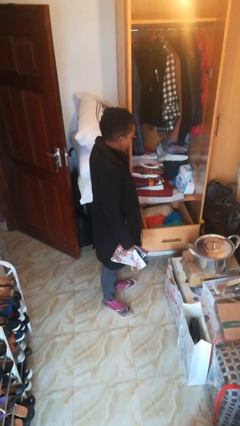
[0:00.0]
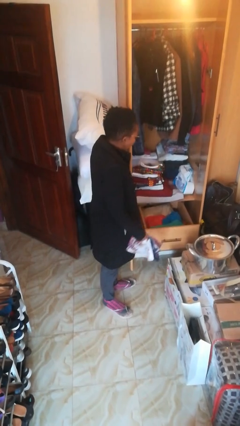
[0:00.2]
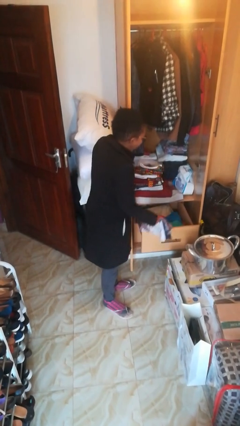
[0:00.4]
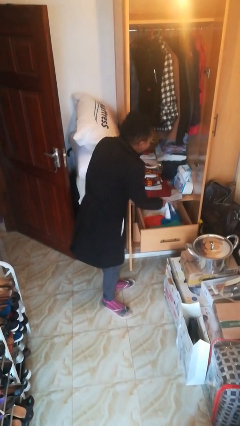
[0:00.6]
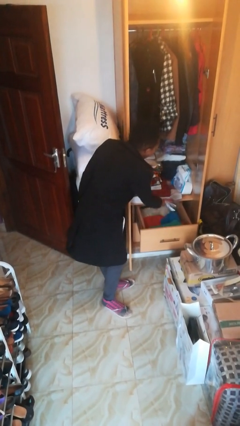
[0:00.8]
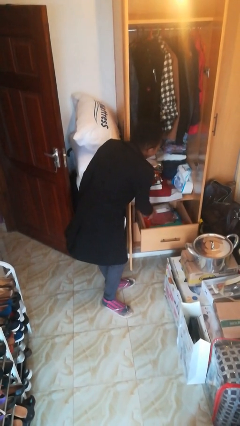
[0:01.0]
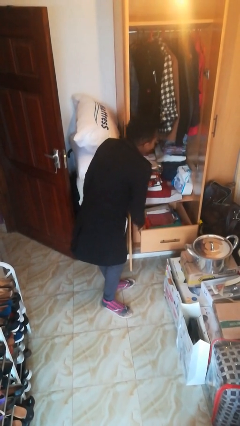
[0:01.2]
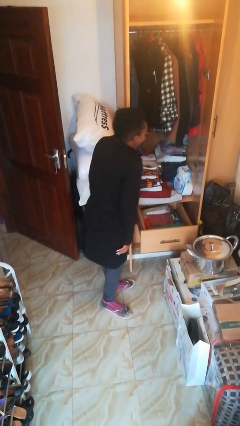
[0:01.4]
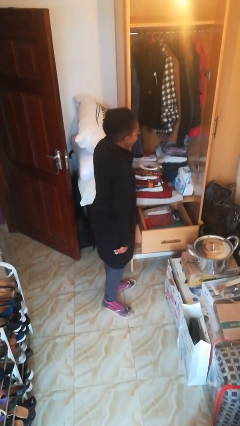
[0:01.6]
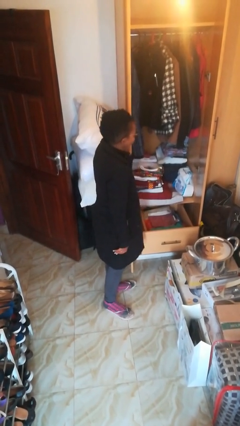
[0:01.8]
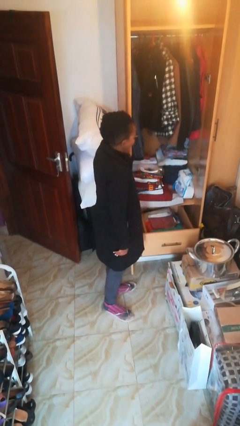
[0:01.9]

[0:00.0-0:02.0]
person puts clothes into dresser

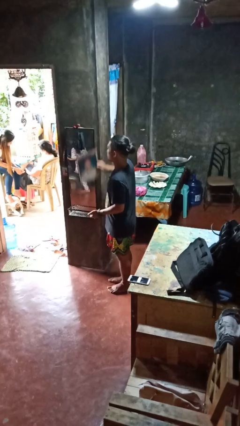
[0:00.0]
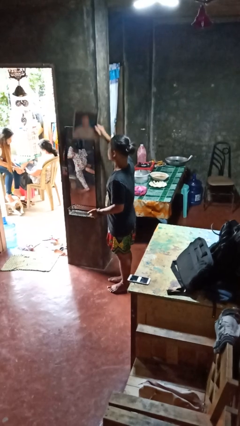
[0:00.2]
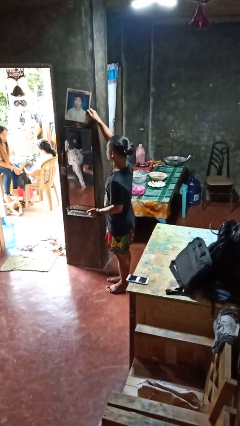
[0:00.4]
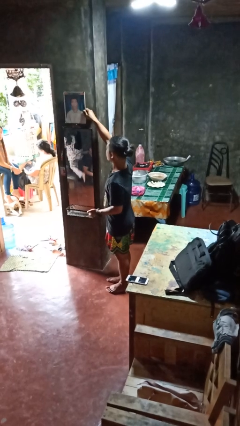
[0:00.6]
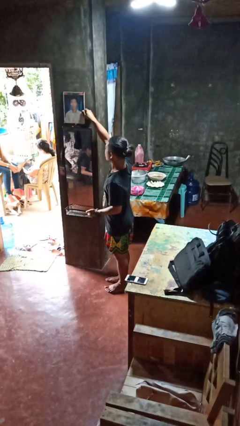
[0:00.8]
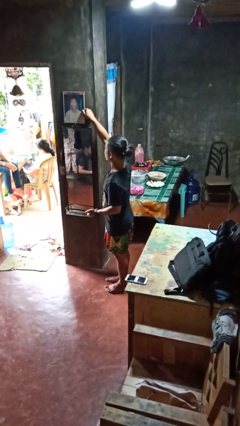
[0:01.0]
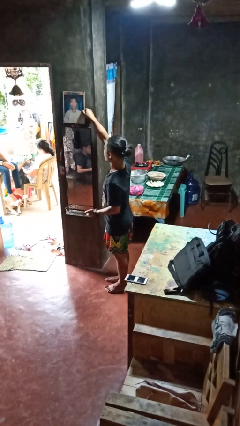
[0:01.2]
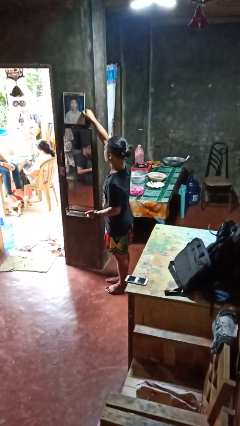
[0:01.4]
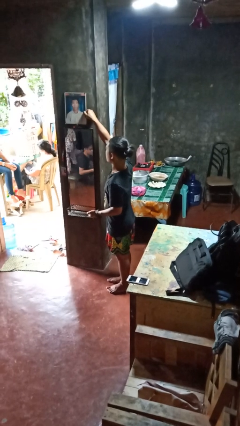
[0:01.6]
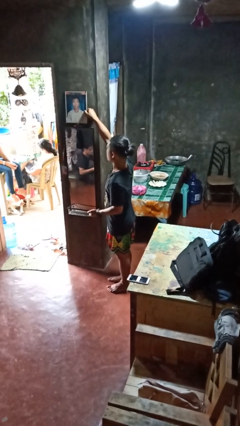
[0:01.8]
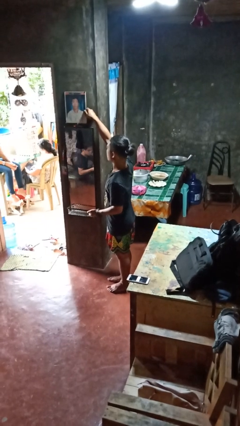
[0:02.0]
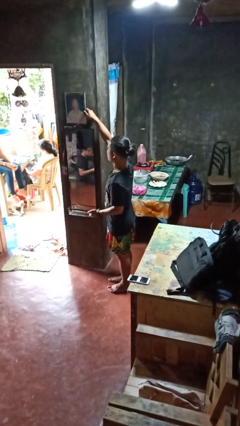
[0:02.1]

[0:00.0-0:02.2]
person puts up picture frame

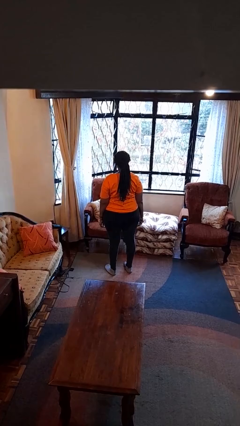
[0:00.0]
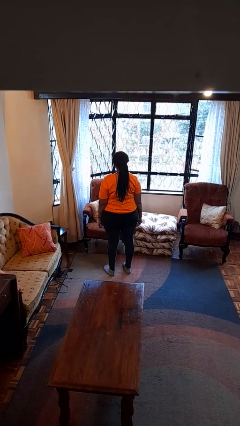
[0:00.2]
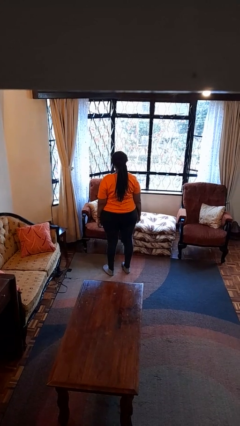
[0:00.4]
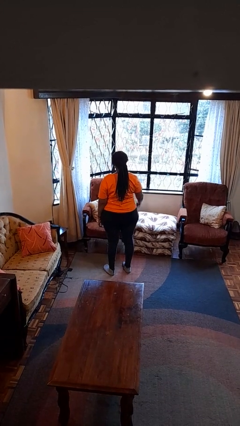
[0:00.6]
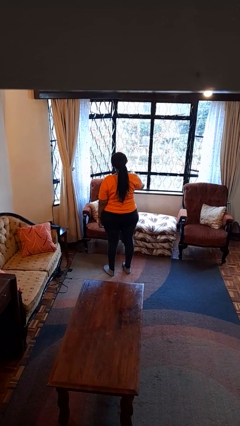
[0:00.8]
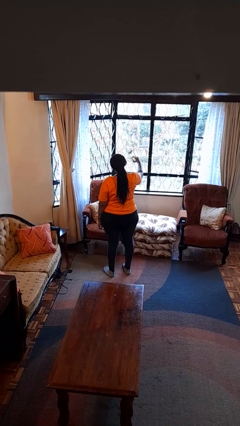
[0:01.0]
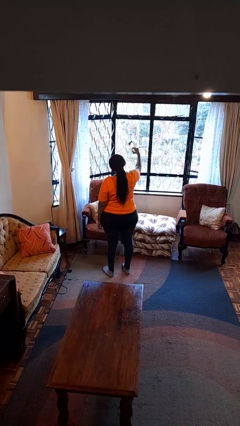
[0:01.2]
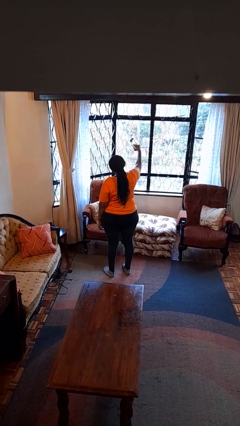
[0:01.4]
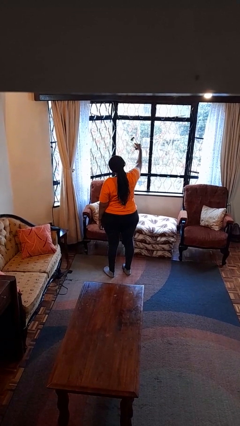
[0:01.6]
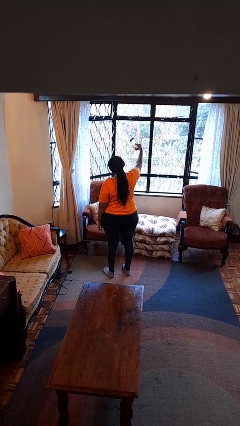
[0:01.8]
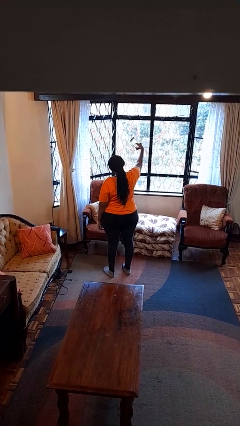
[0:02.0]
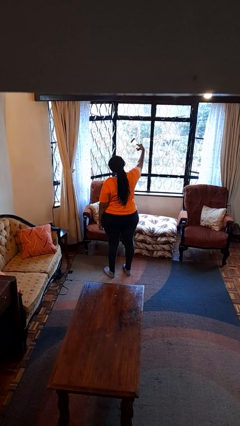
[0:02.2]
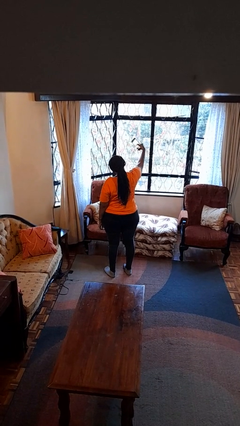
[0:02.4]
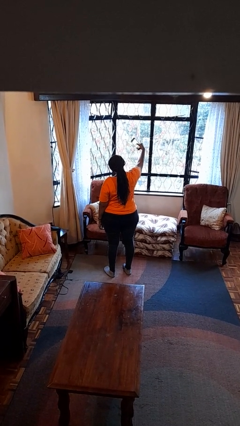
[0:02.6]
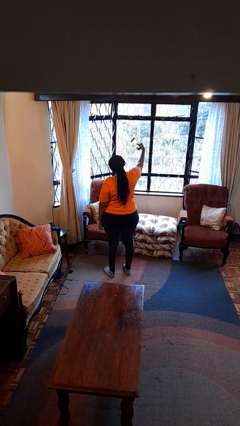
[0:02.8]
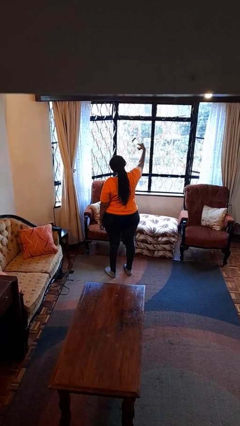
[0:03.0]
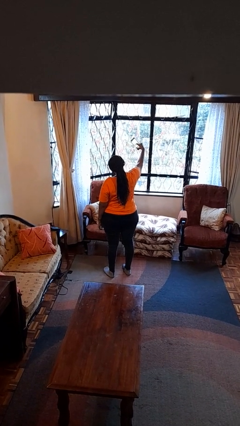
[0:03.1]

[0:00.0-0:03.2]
person takes selfie

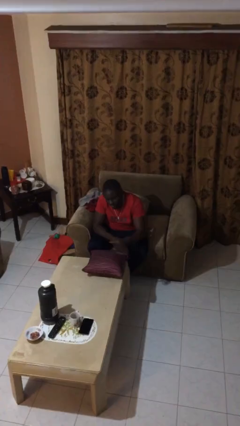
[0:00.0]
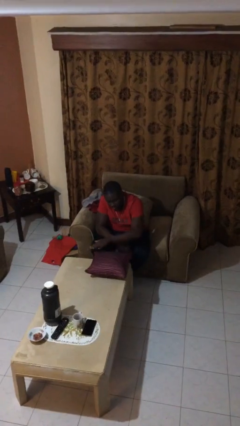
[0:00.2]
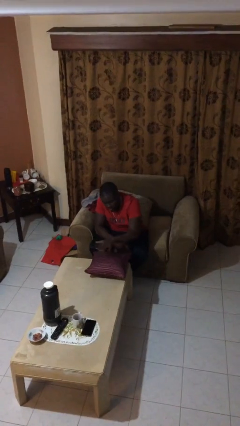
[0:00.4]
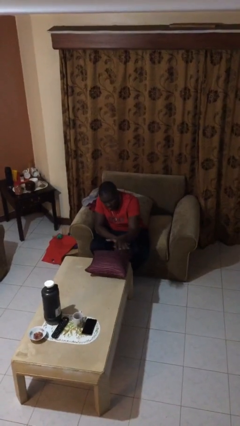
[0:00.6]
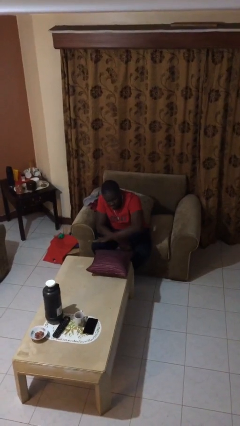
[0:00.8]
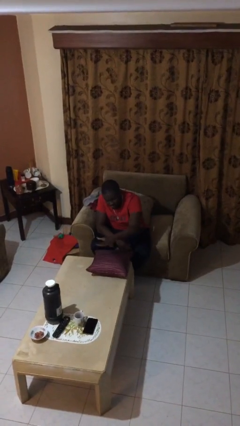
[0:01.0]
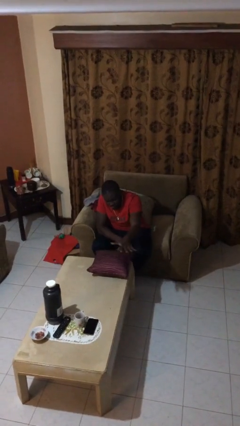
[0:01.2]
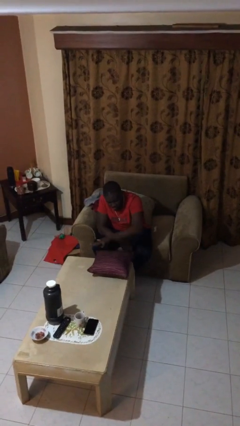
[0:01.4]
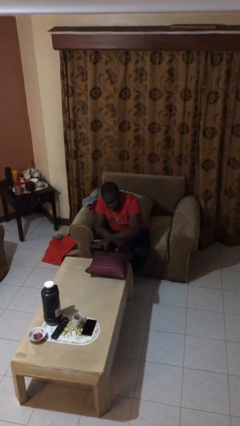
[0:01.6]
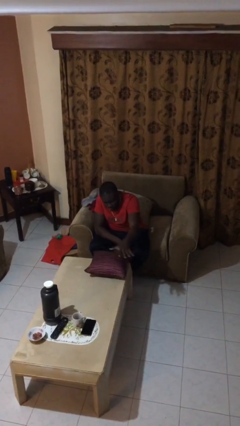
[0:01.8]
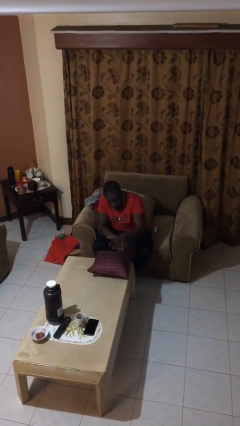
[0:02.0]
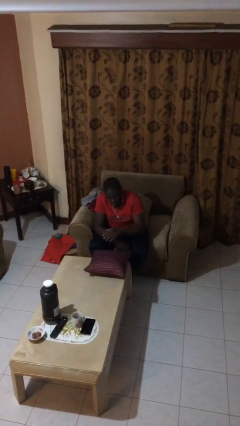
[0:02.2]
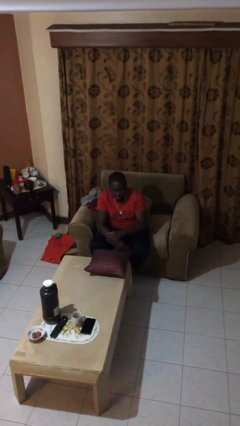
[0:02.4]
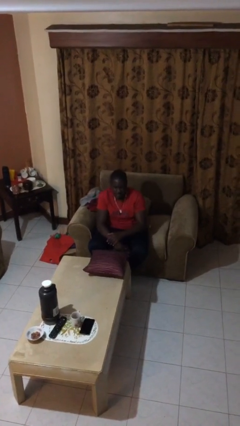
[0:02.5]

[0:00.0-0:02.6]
person waves hand over object

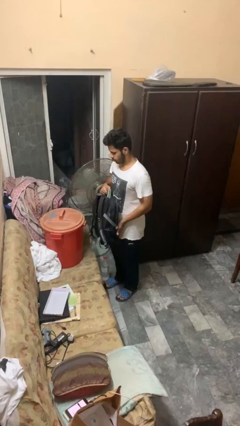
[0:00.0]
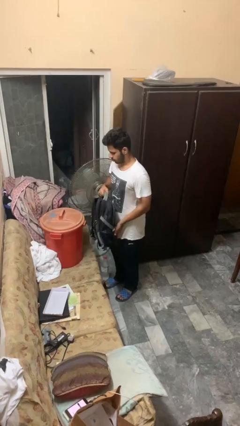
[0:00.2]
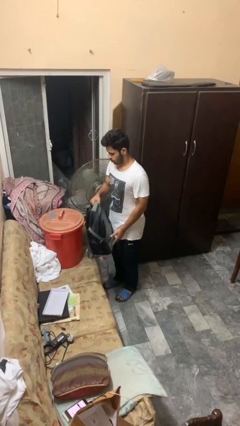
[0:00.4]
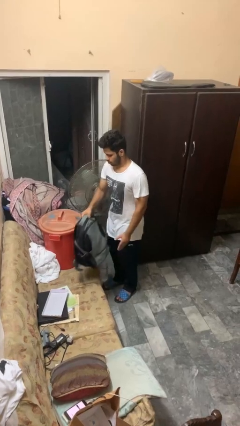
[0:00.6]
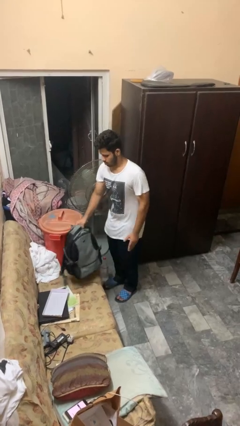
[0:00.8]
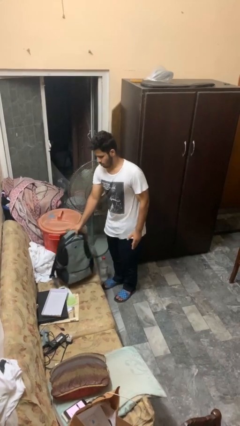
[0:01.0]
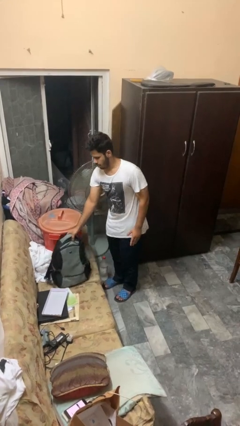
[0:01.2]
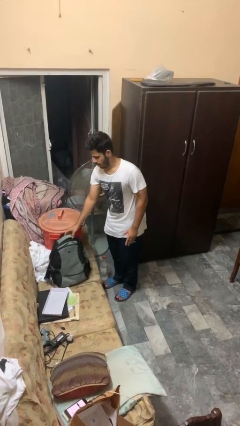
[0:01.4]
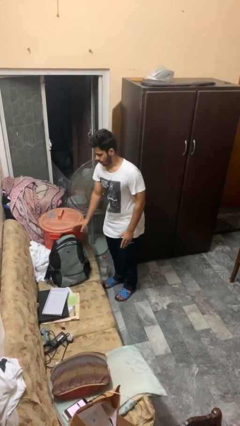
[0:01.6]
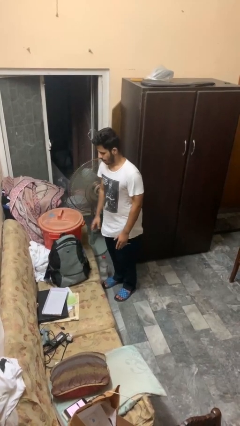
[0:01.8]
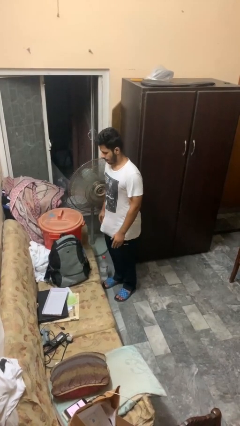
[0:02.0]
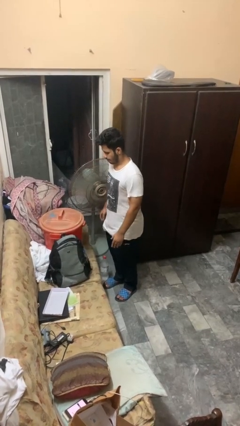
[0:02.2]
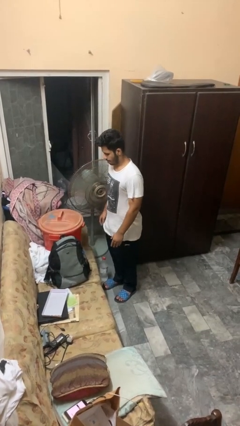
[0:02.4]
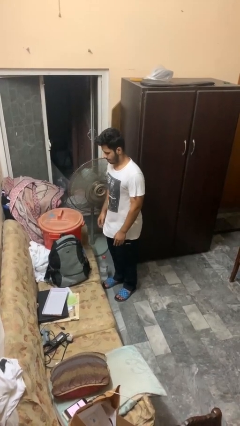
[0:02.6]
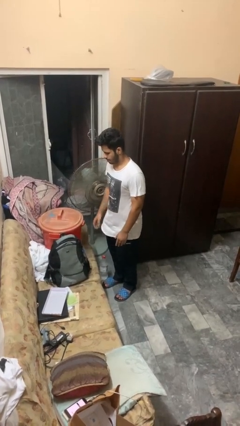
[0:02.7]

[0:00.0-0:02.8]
person puts down object on couch

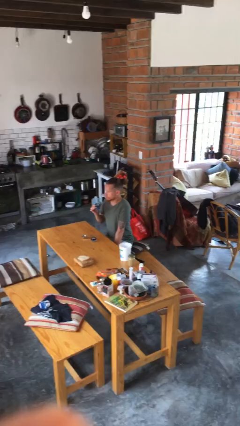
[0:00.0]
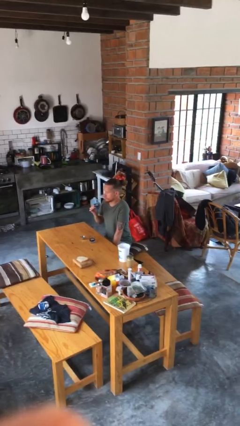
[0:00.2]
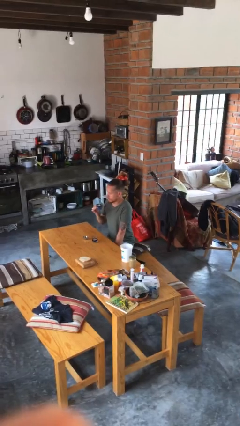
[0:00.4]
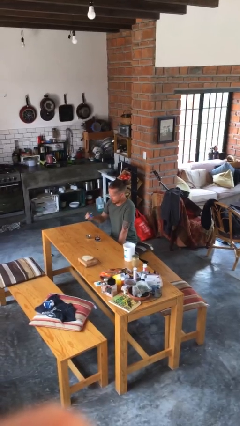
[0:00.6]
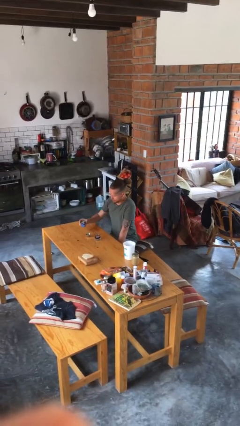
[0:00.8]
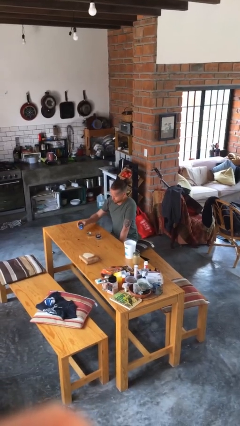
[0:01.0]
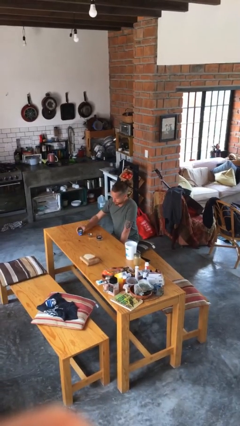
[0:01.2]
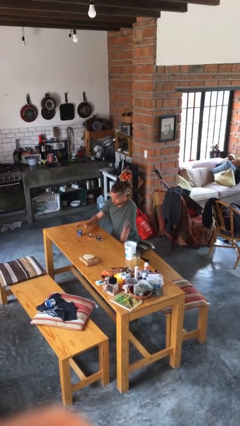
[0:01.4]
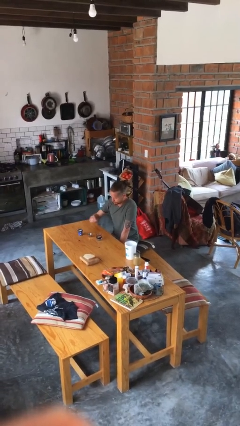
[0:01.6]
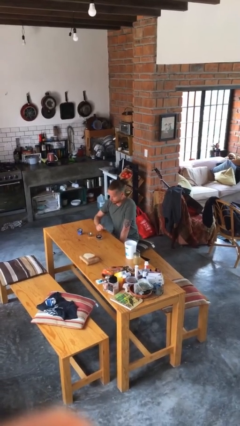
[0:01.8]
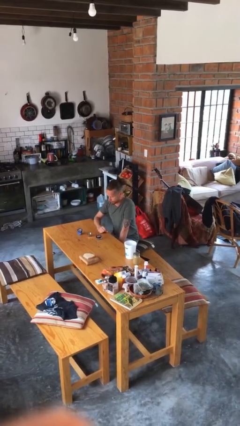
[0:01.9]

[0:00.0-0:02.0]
person puts down object on table

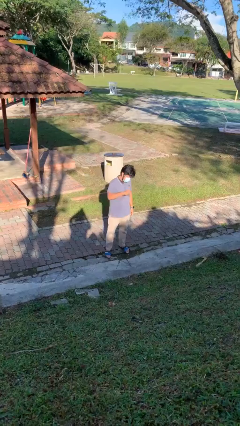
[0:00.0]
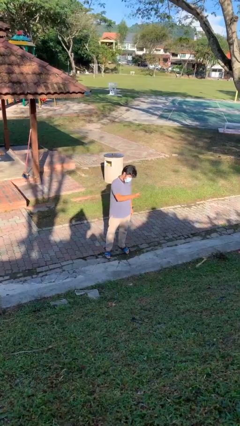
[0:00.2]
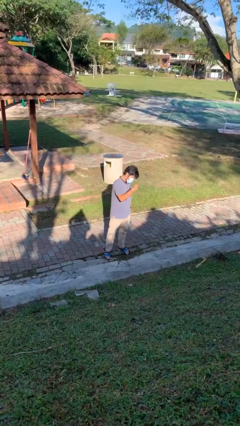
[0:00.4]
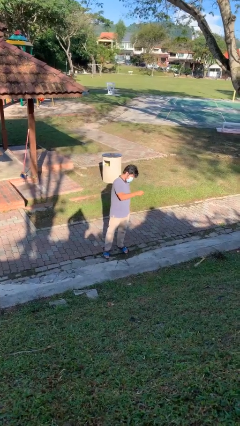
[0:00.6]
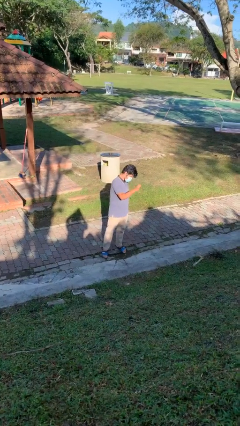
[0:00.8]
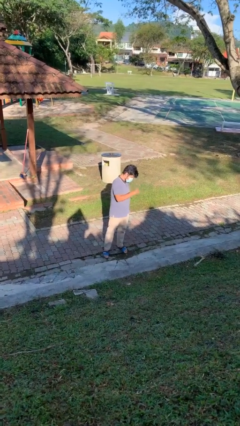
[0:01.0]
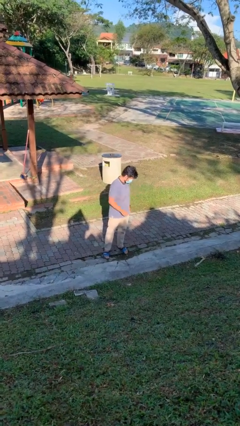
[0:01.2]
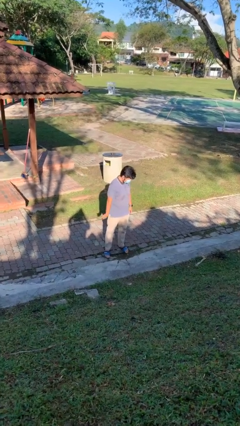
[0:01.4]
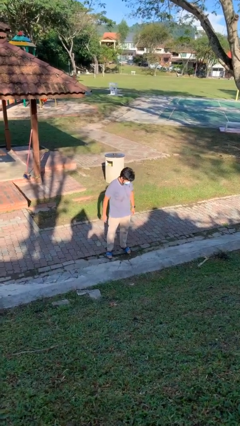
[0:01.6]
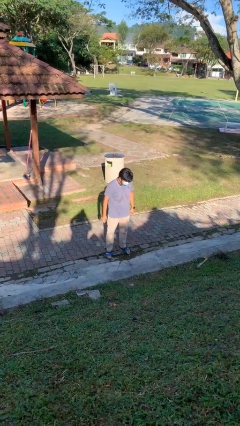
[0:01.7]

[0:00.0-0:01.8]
person snaps fingers

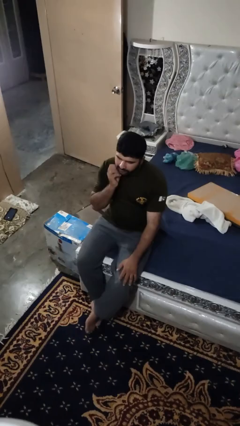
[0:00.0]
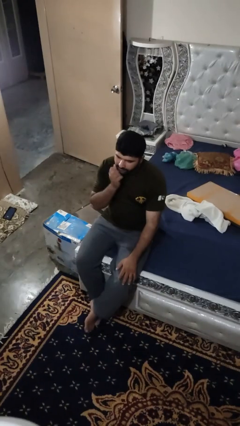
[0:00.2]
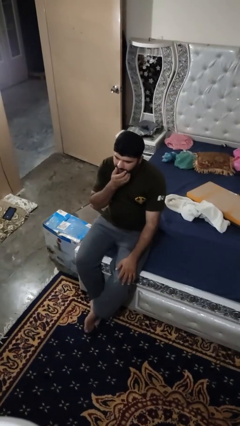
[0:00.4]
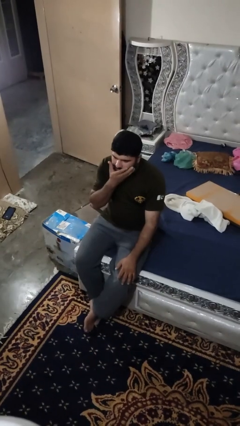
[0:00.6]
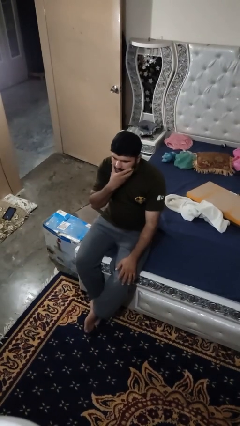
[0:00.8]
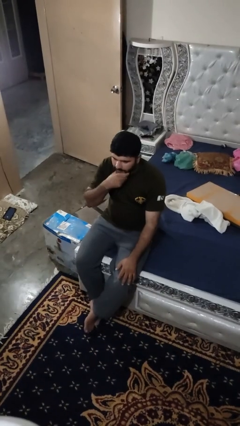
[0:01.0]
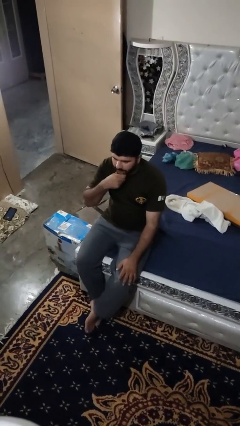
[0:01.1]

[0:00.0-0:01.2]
person strokes chin
